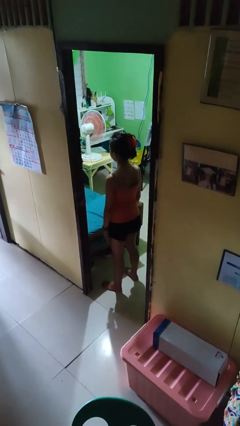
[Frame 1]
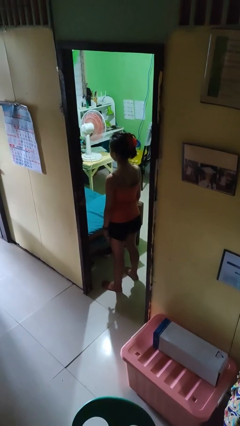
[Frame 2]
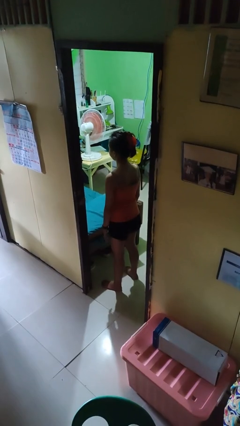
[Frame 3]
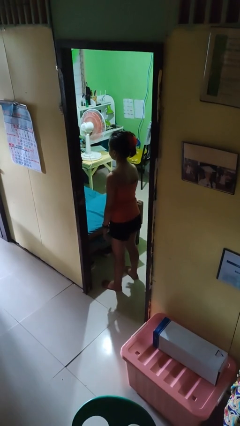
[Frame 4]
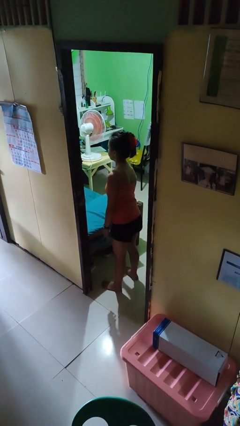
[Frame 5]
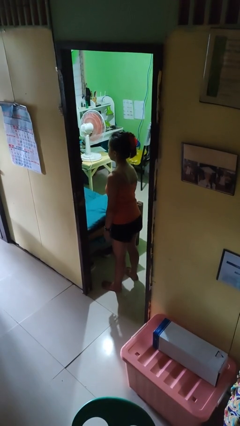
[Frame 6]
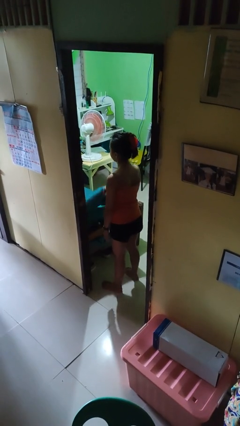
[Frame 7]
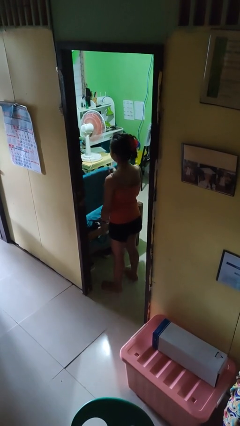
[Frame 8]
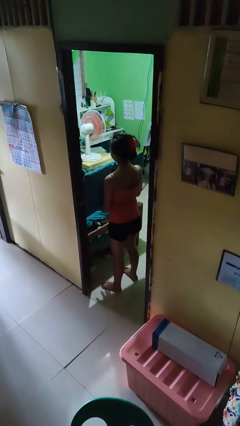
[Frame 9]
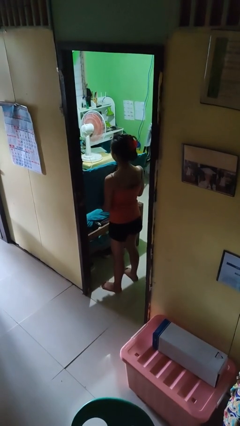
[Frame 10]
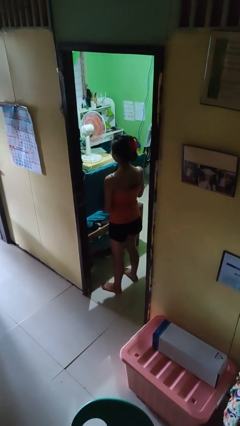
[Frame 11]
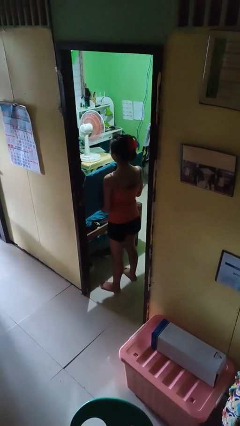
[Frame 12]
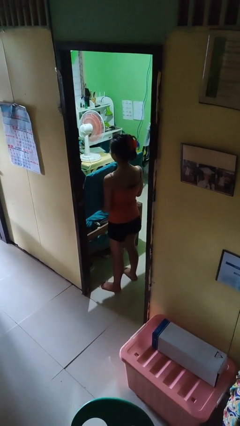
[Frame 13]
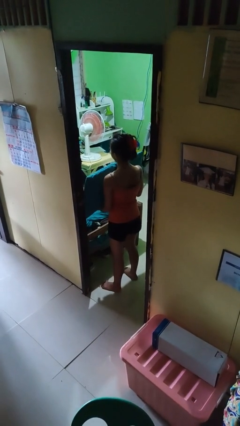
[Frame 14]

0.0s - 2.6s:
person picks up object from bed

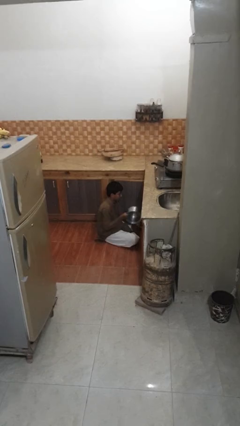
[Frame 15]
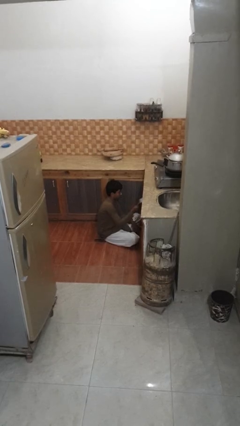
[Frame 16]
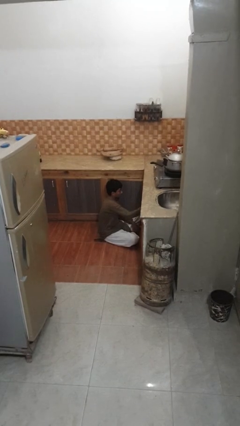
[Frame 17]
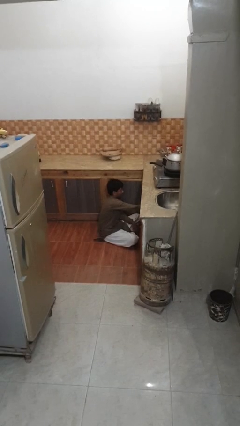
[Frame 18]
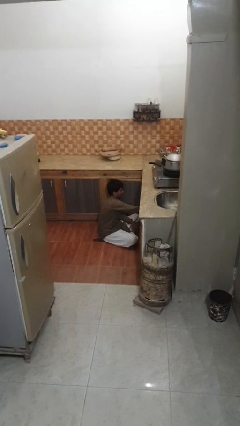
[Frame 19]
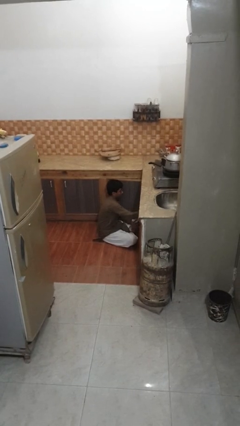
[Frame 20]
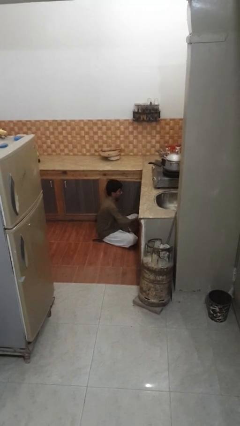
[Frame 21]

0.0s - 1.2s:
person puts object into kitchen drawer

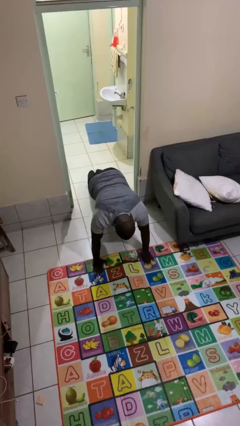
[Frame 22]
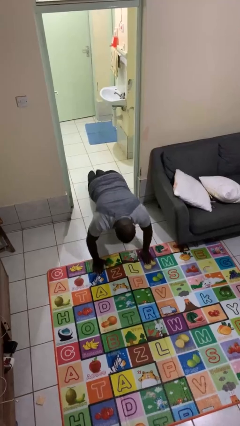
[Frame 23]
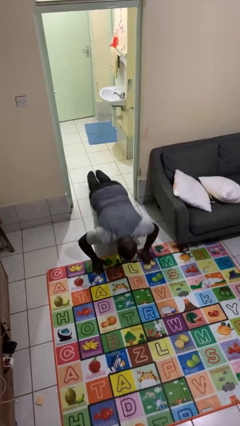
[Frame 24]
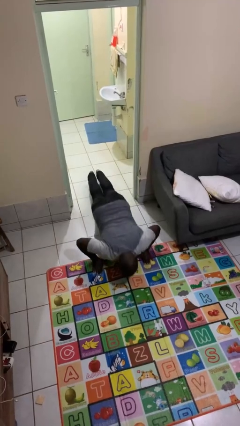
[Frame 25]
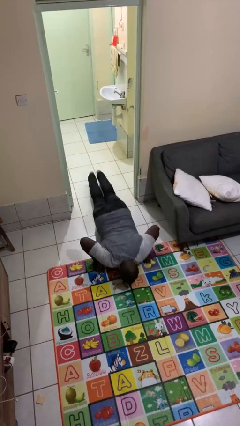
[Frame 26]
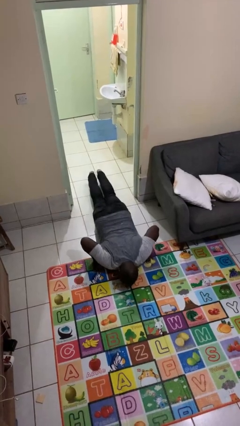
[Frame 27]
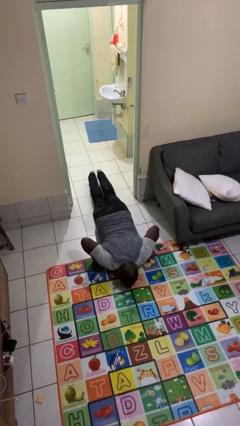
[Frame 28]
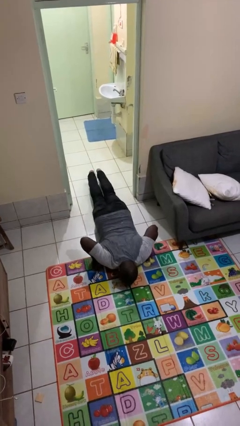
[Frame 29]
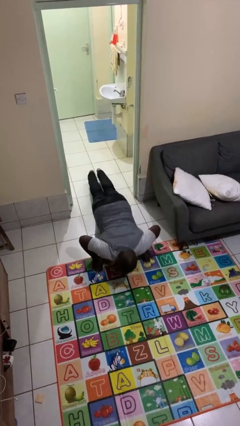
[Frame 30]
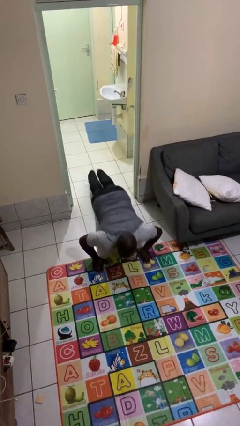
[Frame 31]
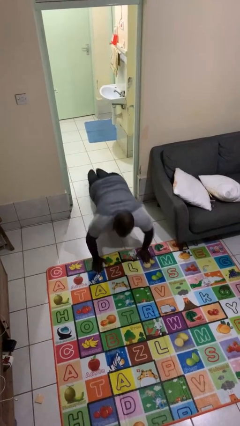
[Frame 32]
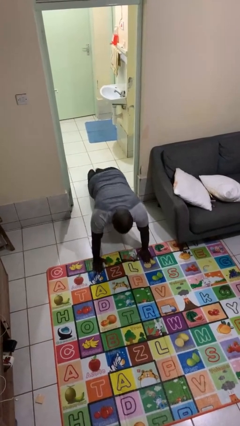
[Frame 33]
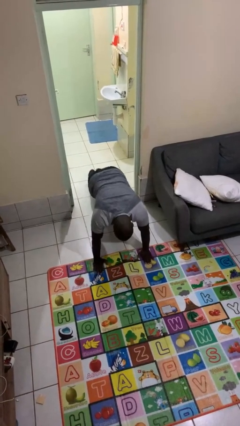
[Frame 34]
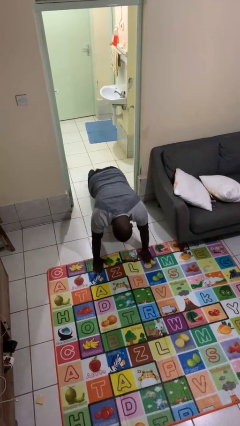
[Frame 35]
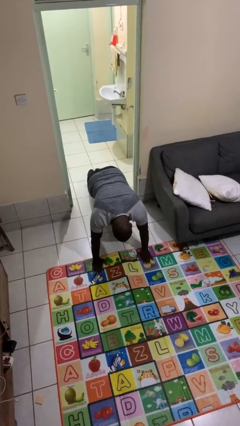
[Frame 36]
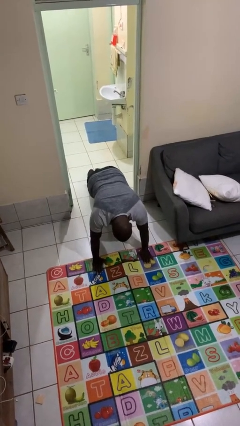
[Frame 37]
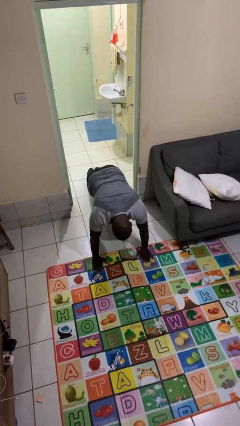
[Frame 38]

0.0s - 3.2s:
person exercises with pushup

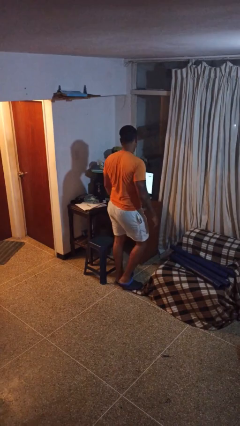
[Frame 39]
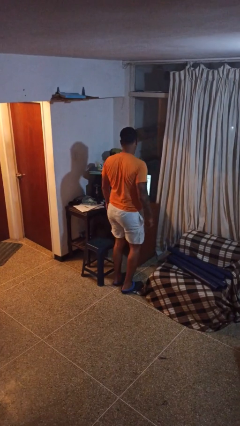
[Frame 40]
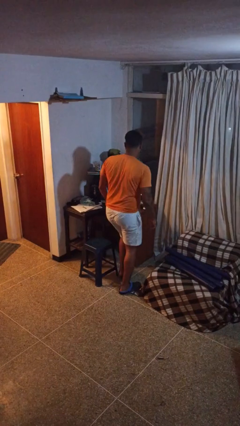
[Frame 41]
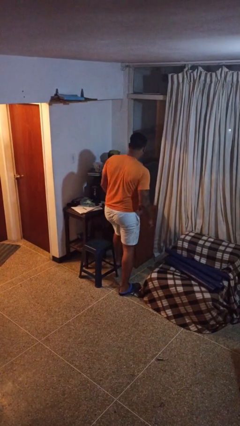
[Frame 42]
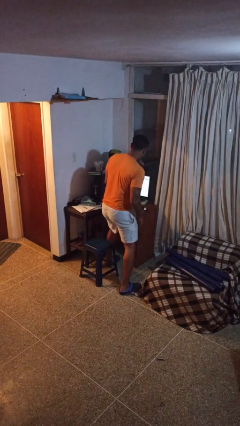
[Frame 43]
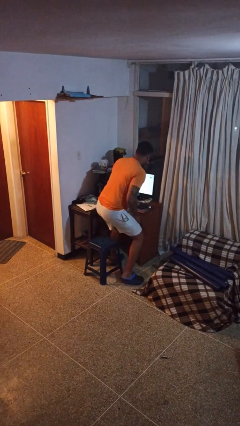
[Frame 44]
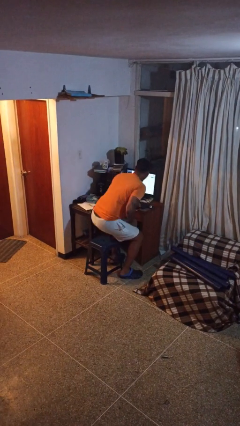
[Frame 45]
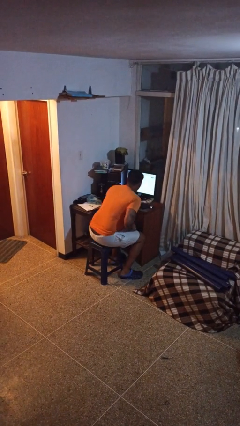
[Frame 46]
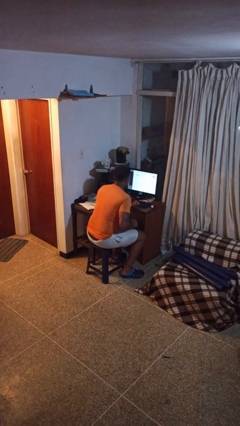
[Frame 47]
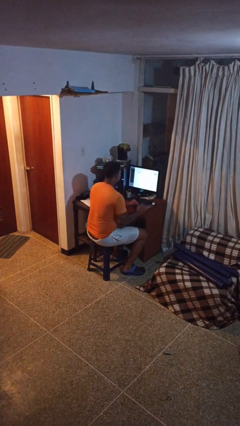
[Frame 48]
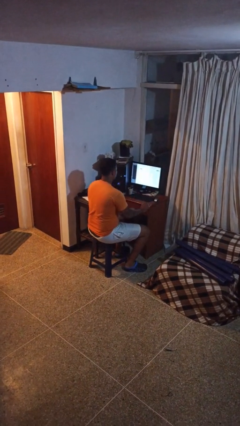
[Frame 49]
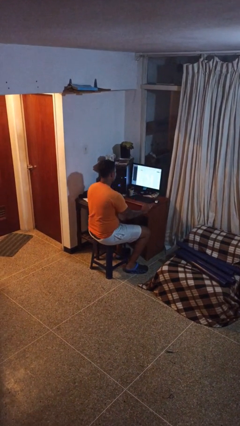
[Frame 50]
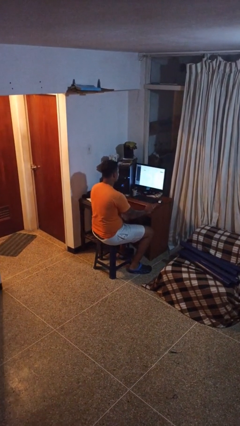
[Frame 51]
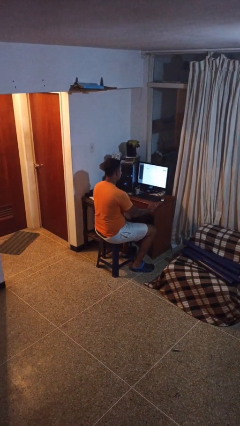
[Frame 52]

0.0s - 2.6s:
person sits down

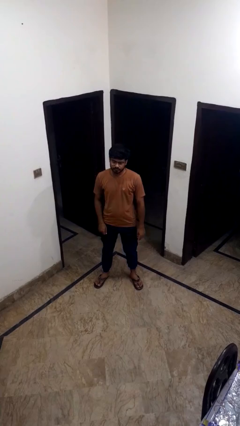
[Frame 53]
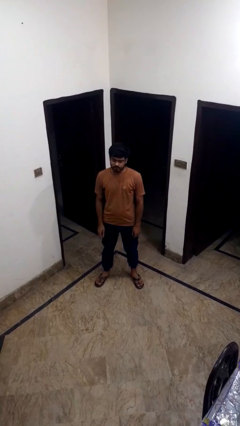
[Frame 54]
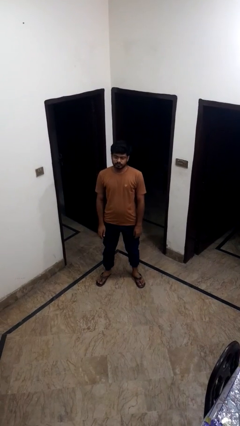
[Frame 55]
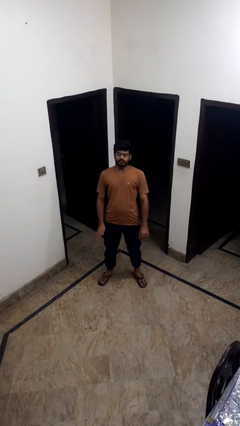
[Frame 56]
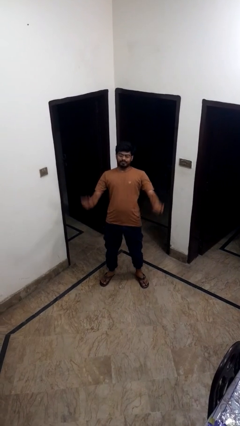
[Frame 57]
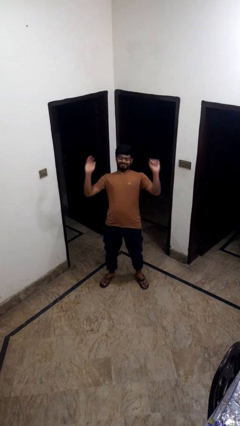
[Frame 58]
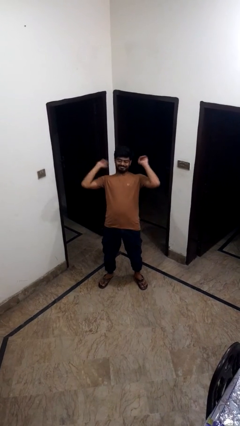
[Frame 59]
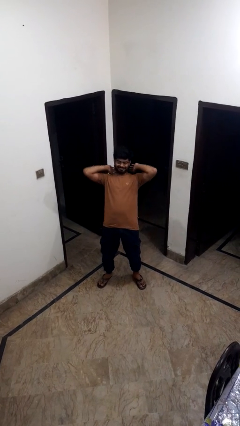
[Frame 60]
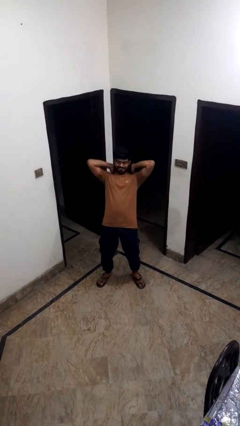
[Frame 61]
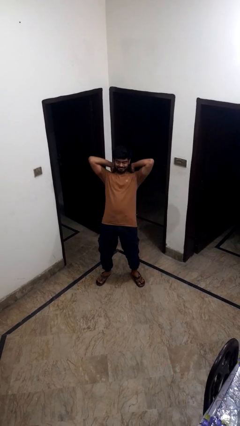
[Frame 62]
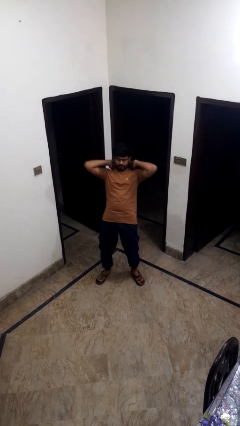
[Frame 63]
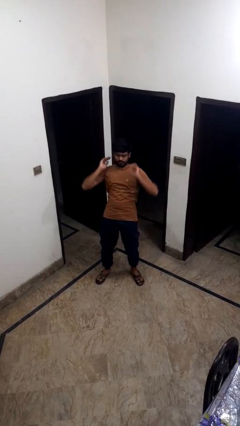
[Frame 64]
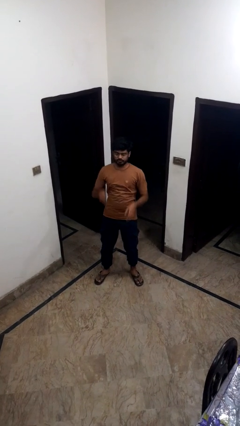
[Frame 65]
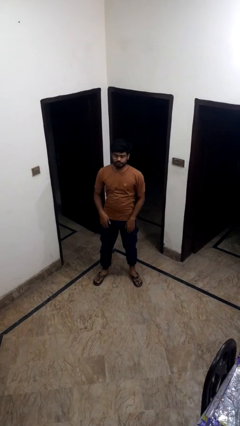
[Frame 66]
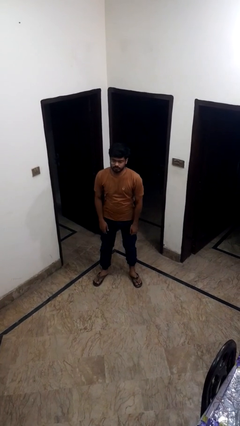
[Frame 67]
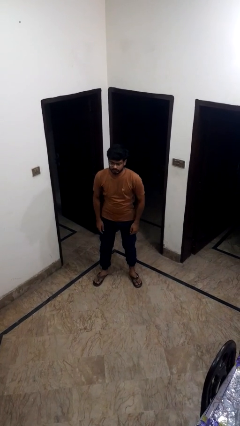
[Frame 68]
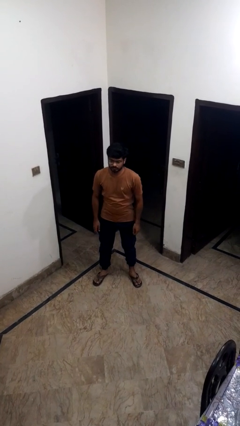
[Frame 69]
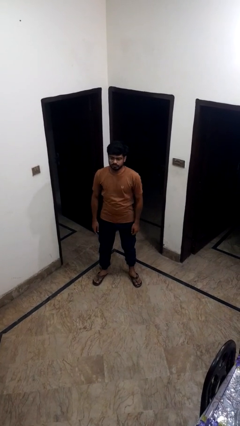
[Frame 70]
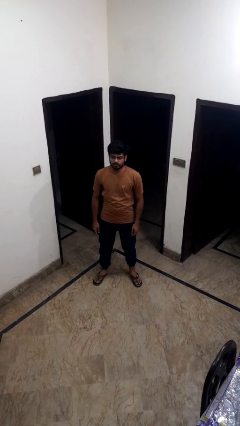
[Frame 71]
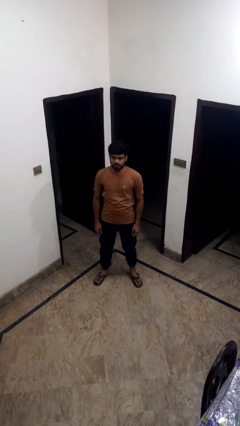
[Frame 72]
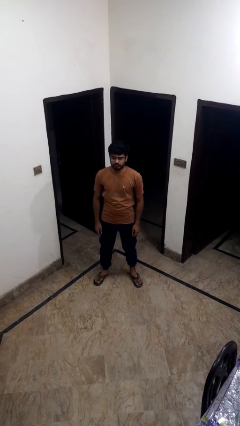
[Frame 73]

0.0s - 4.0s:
person ties jacket around waist

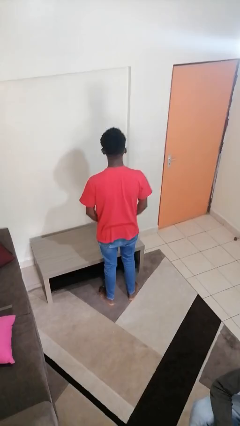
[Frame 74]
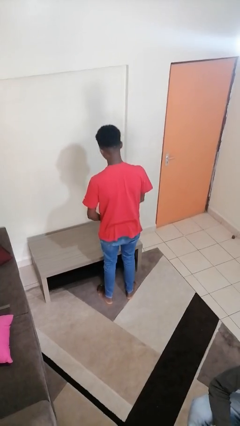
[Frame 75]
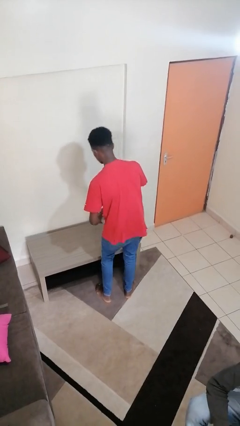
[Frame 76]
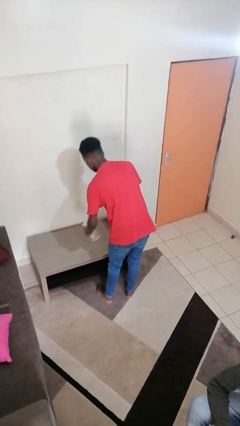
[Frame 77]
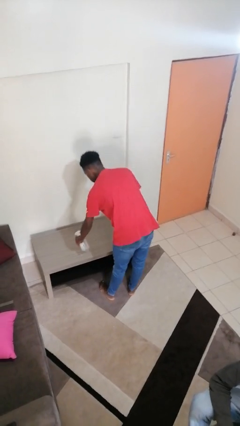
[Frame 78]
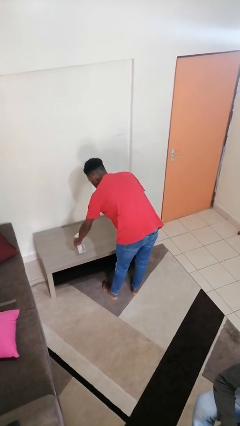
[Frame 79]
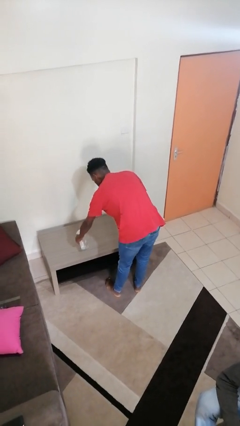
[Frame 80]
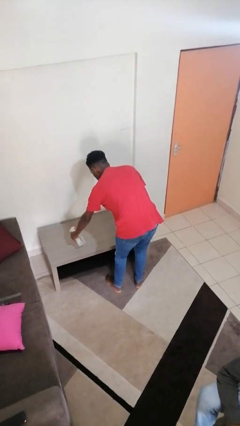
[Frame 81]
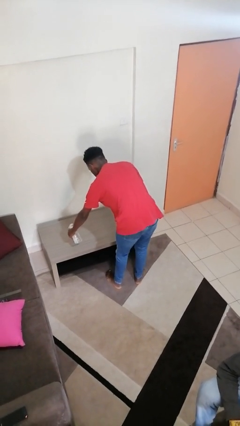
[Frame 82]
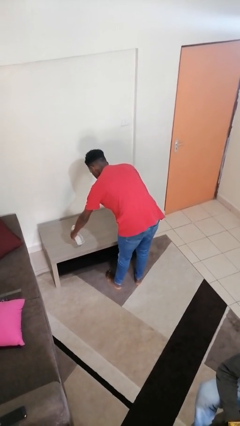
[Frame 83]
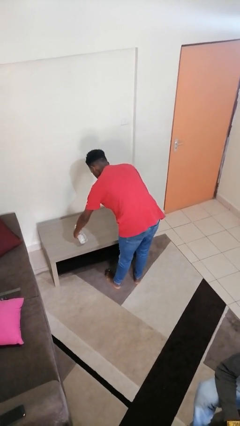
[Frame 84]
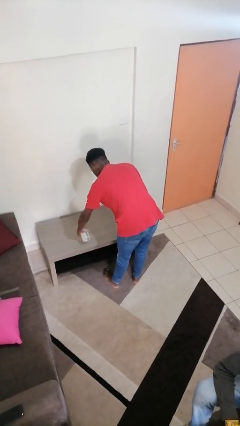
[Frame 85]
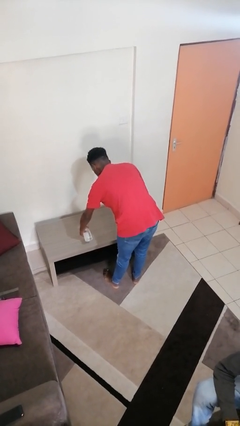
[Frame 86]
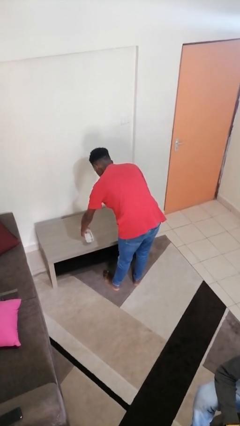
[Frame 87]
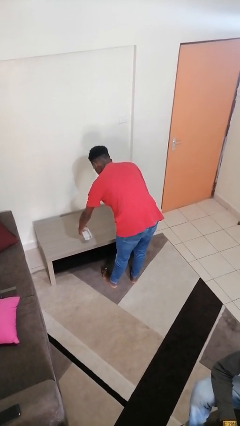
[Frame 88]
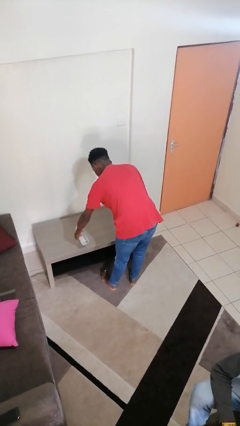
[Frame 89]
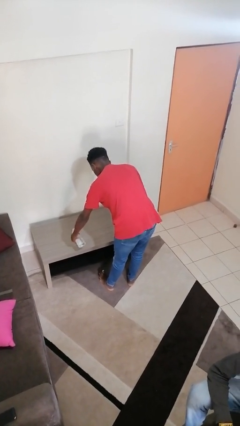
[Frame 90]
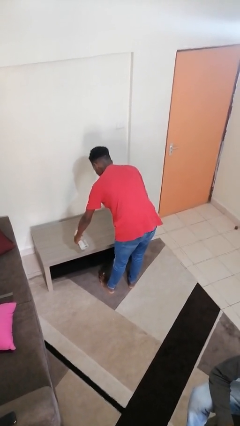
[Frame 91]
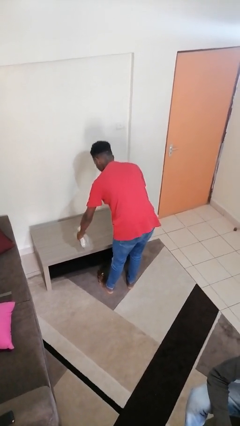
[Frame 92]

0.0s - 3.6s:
person sprays from bottle
